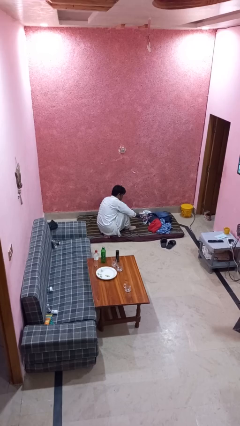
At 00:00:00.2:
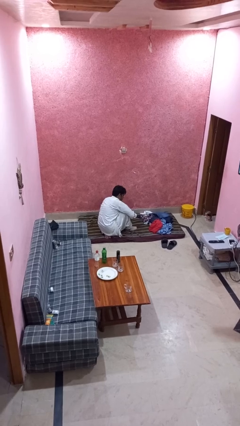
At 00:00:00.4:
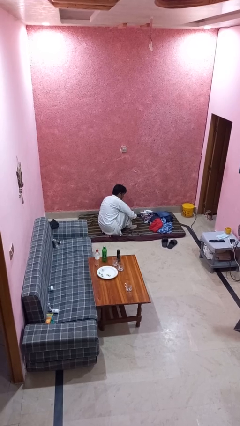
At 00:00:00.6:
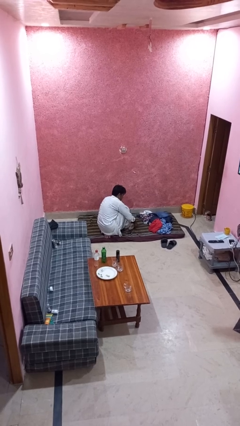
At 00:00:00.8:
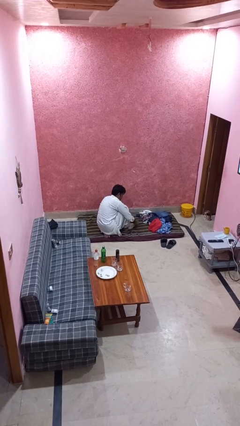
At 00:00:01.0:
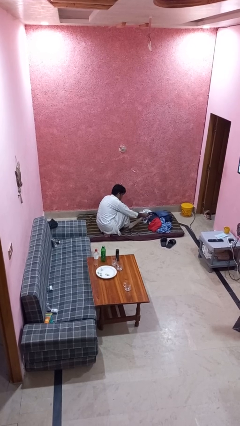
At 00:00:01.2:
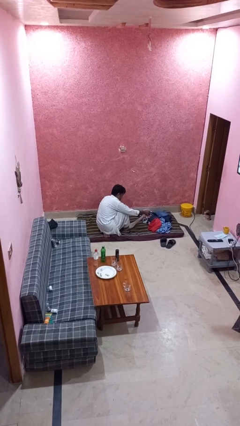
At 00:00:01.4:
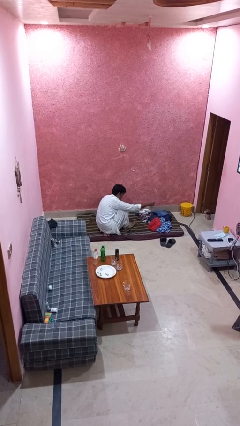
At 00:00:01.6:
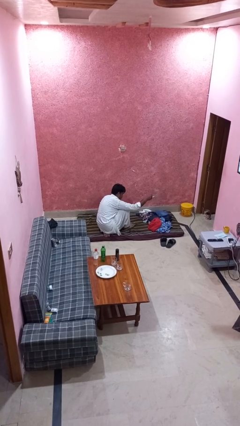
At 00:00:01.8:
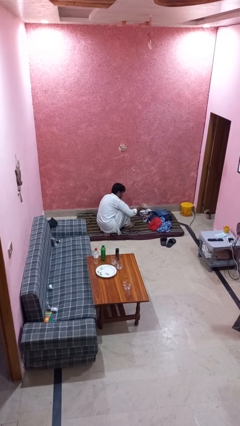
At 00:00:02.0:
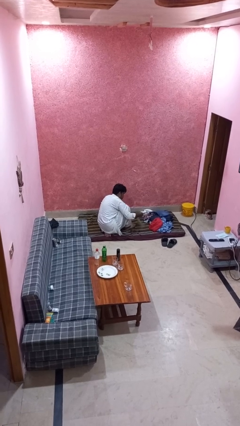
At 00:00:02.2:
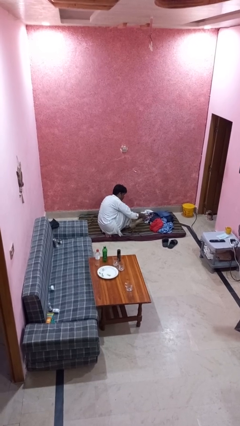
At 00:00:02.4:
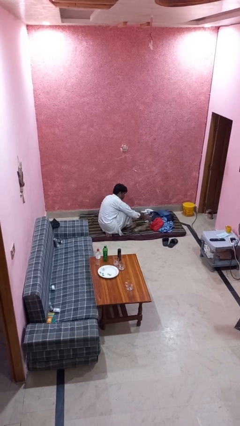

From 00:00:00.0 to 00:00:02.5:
person takes off socks

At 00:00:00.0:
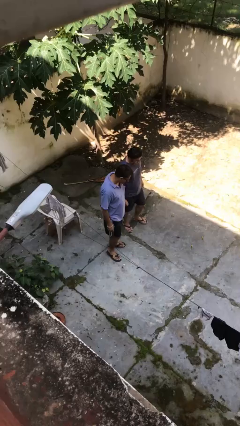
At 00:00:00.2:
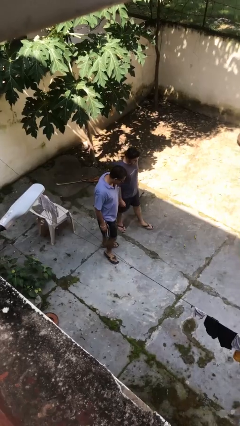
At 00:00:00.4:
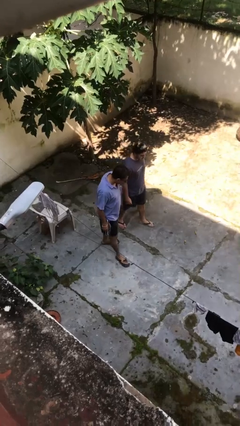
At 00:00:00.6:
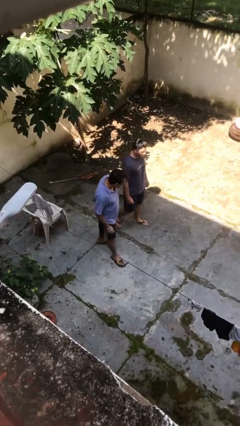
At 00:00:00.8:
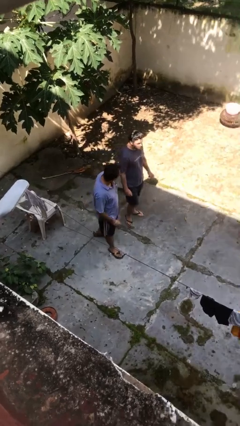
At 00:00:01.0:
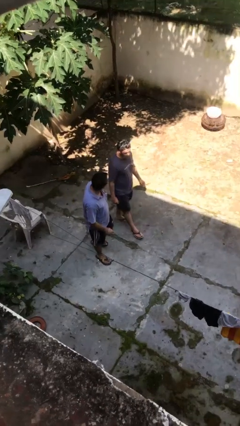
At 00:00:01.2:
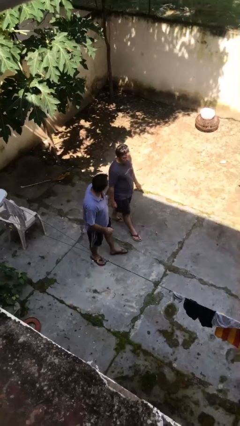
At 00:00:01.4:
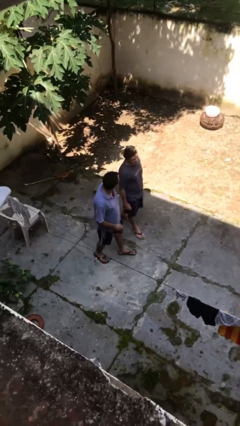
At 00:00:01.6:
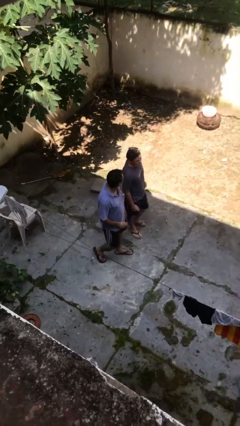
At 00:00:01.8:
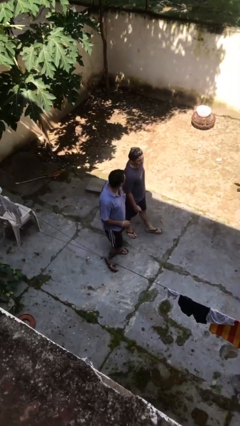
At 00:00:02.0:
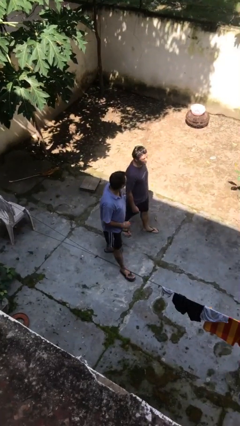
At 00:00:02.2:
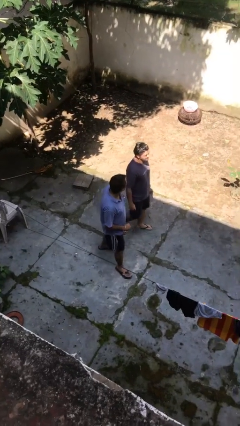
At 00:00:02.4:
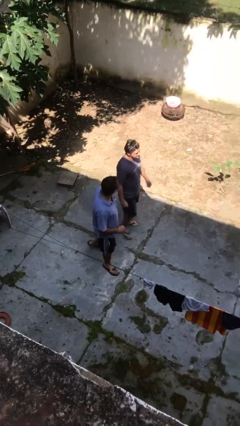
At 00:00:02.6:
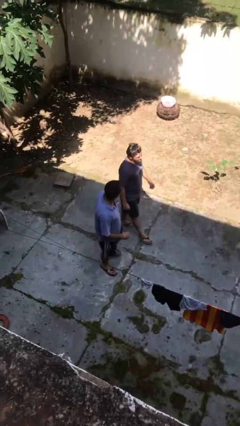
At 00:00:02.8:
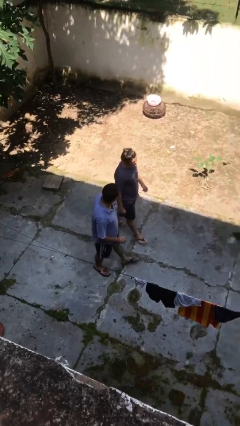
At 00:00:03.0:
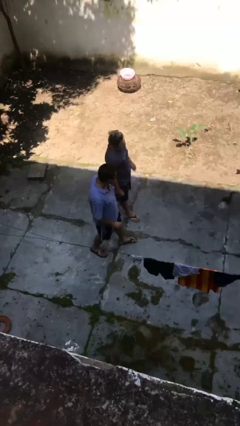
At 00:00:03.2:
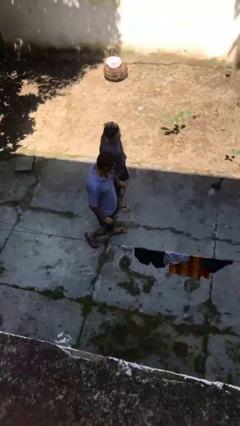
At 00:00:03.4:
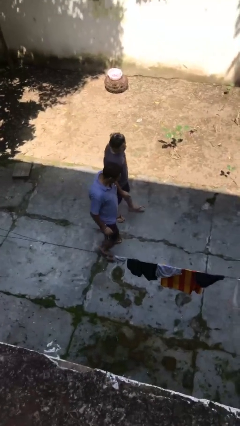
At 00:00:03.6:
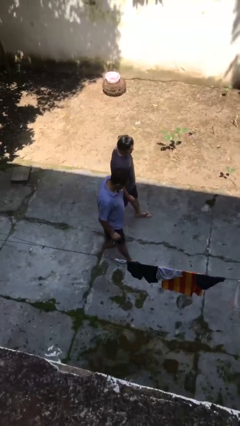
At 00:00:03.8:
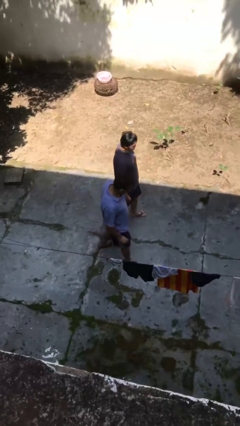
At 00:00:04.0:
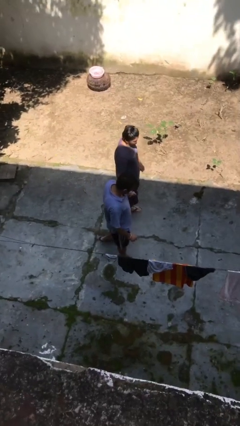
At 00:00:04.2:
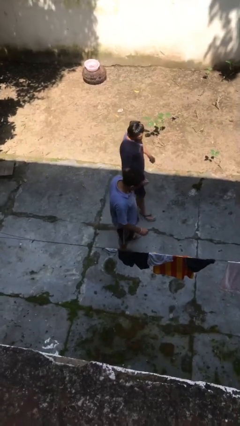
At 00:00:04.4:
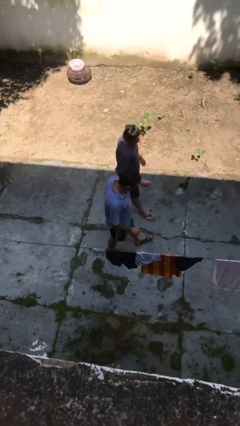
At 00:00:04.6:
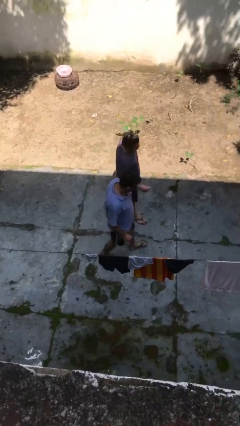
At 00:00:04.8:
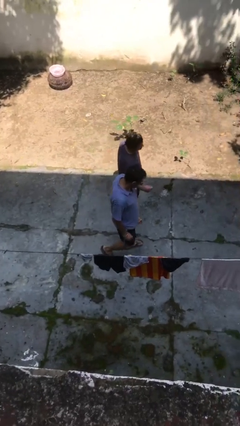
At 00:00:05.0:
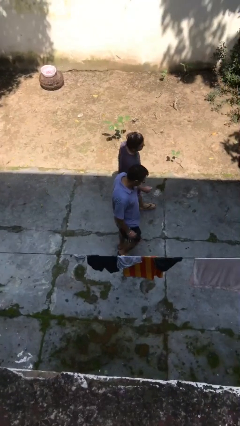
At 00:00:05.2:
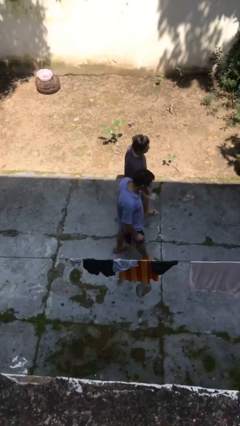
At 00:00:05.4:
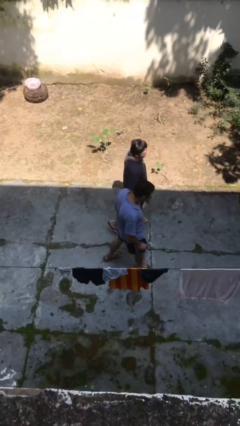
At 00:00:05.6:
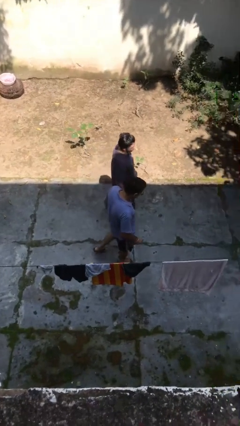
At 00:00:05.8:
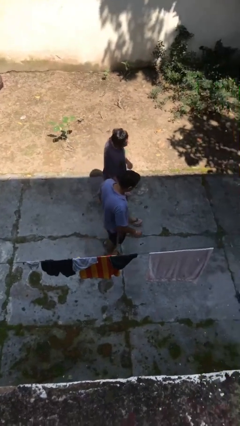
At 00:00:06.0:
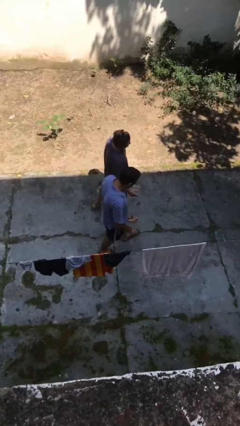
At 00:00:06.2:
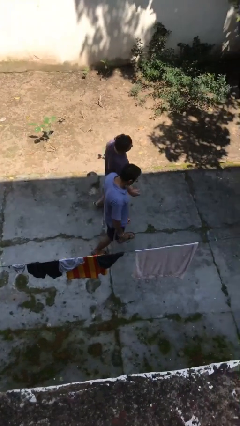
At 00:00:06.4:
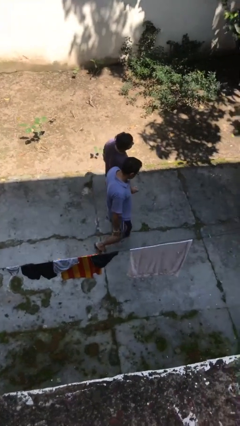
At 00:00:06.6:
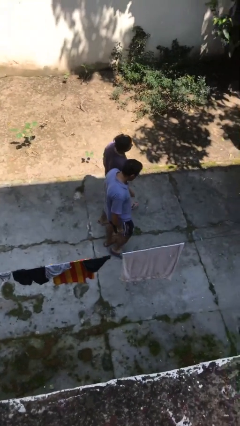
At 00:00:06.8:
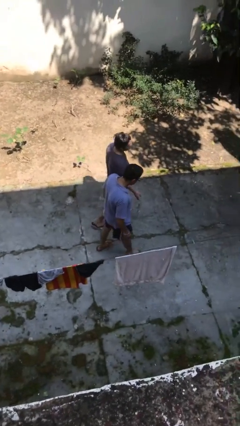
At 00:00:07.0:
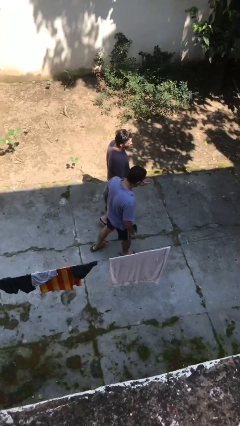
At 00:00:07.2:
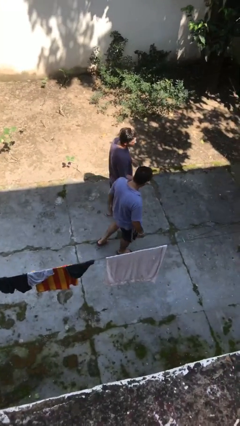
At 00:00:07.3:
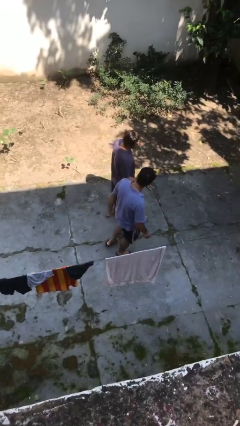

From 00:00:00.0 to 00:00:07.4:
person talks to person

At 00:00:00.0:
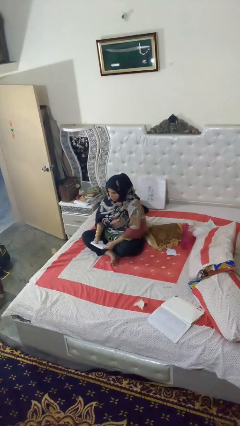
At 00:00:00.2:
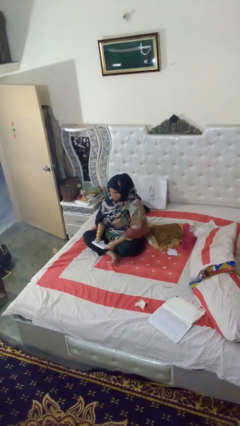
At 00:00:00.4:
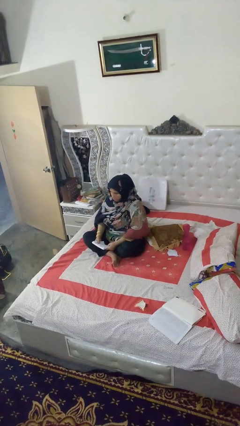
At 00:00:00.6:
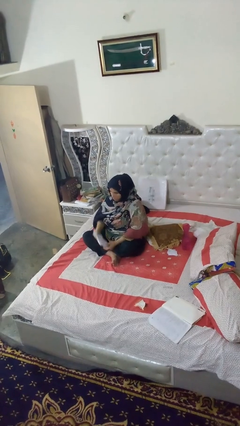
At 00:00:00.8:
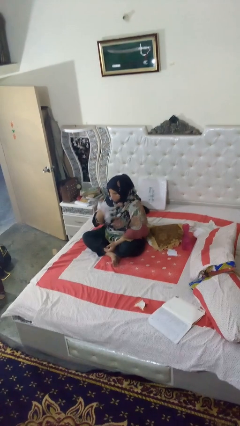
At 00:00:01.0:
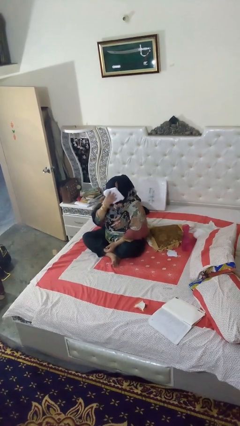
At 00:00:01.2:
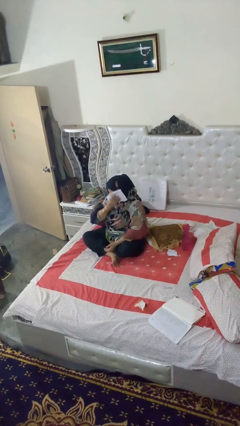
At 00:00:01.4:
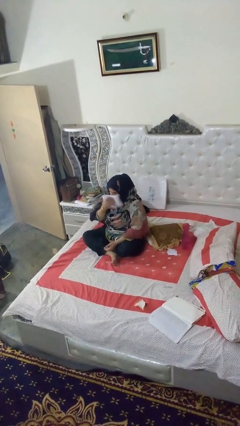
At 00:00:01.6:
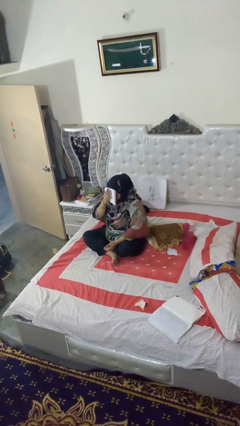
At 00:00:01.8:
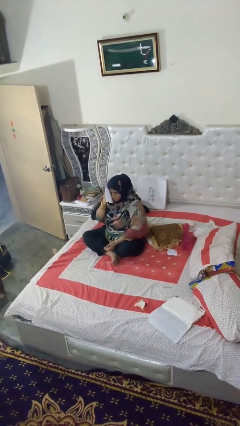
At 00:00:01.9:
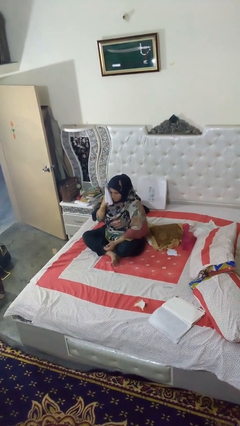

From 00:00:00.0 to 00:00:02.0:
person wipes mouth with napkin

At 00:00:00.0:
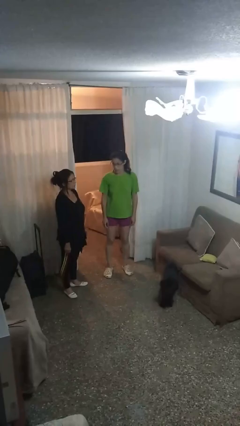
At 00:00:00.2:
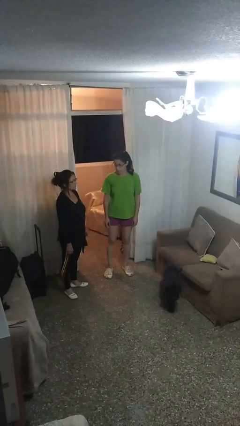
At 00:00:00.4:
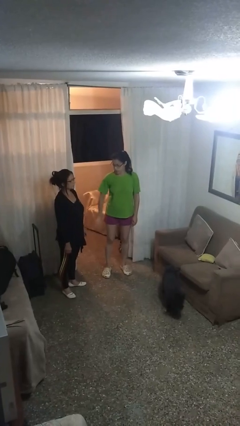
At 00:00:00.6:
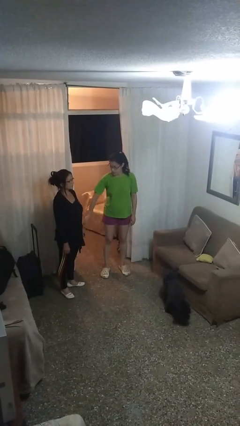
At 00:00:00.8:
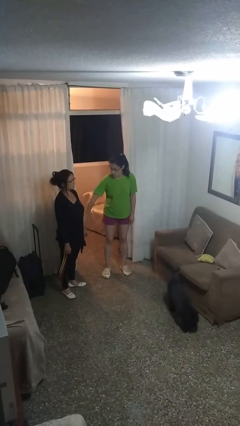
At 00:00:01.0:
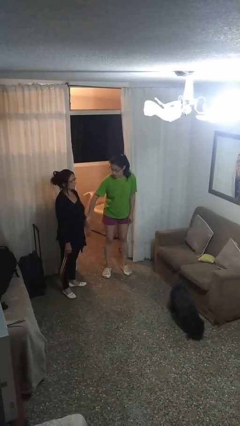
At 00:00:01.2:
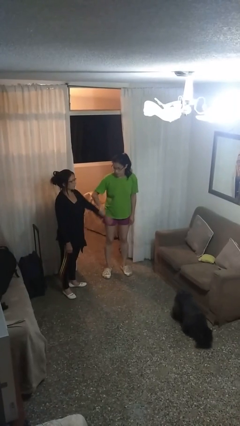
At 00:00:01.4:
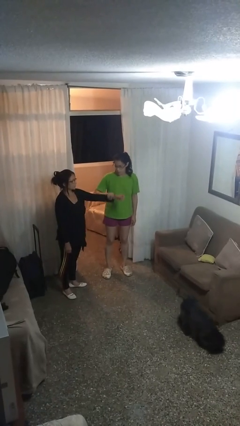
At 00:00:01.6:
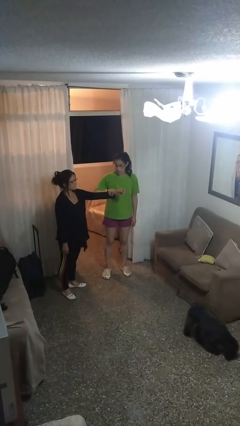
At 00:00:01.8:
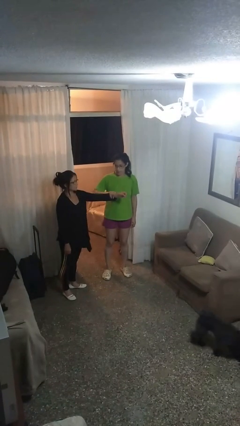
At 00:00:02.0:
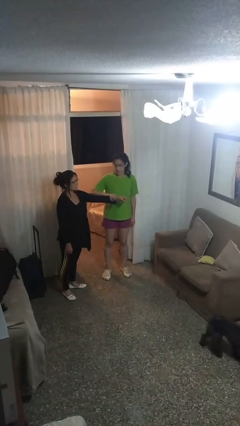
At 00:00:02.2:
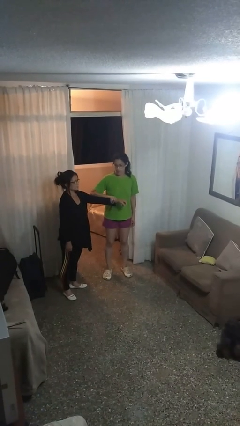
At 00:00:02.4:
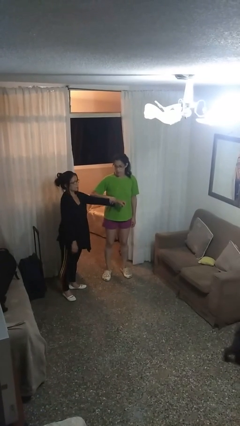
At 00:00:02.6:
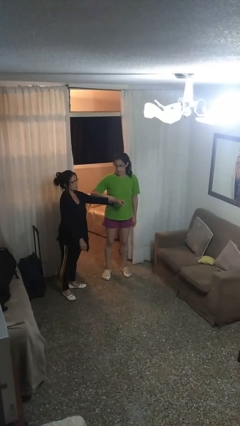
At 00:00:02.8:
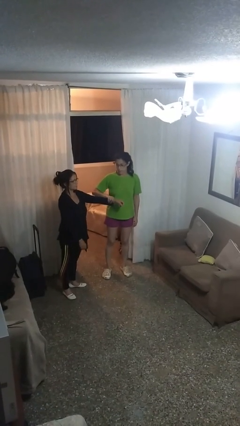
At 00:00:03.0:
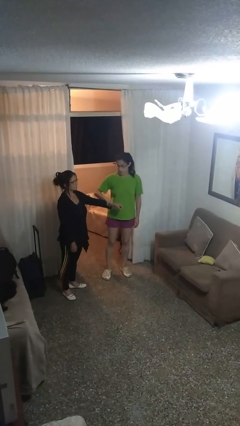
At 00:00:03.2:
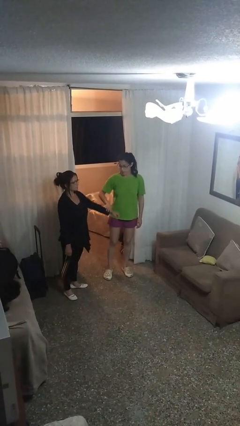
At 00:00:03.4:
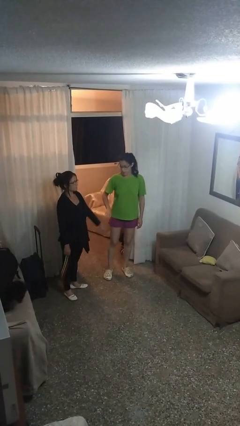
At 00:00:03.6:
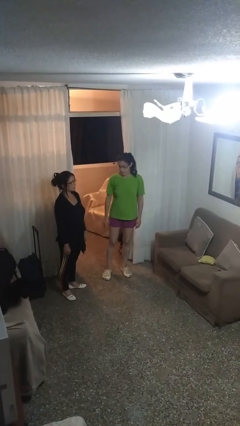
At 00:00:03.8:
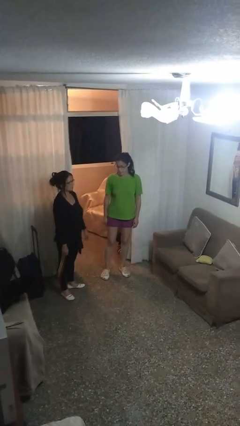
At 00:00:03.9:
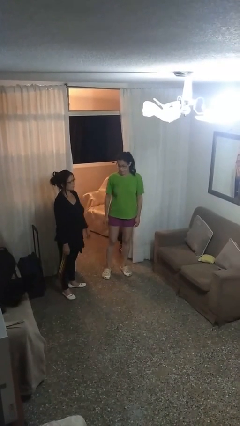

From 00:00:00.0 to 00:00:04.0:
person grabs person by forearm

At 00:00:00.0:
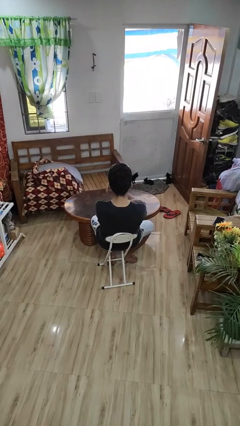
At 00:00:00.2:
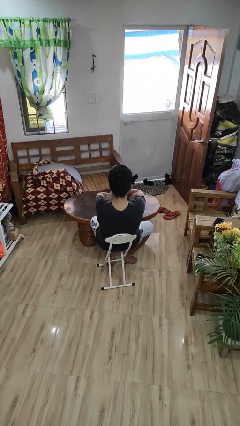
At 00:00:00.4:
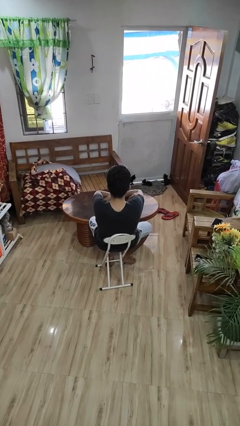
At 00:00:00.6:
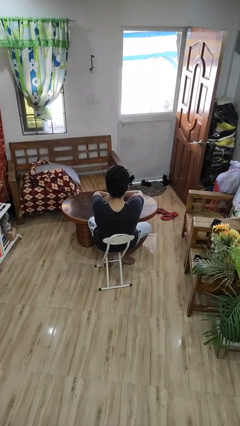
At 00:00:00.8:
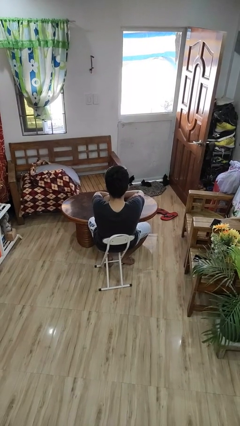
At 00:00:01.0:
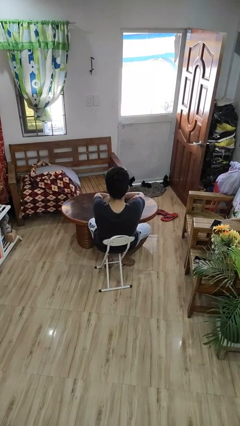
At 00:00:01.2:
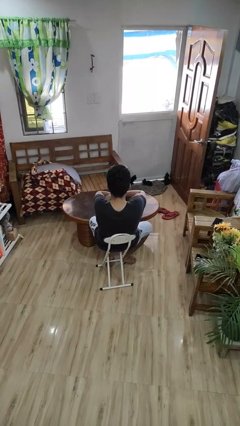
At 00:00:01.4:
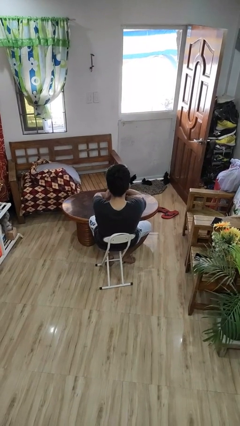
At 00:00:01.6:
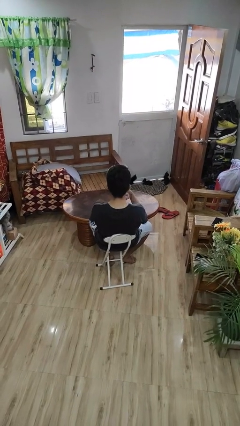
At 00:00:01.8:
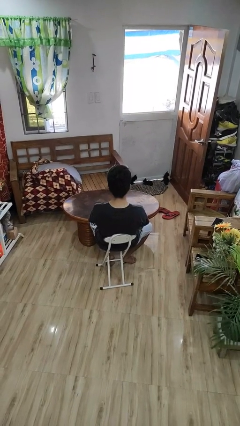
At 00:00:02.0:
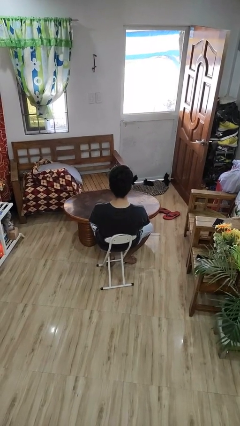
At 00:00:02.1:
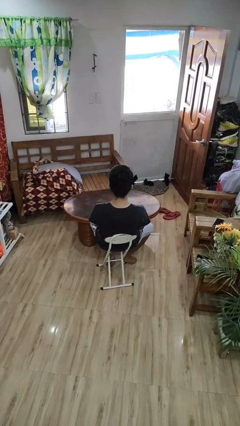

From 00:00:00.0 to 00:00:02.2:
person crosses arms
